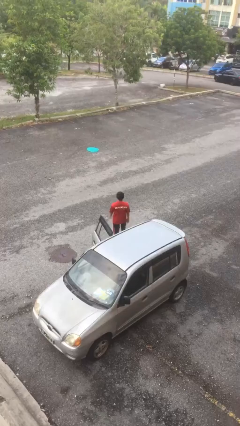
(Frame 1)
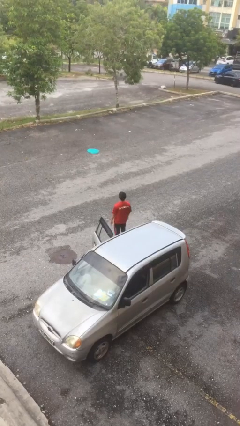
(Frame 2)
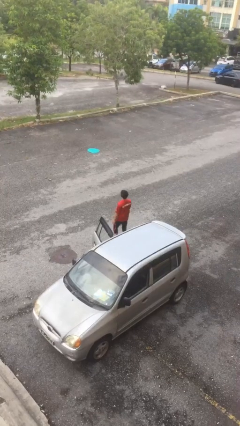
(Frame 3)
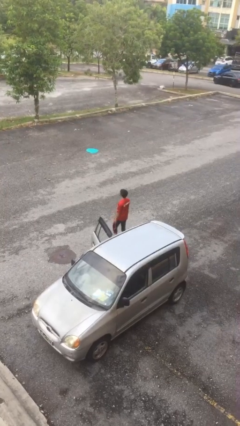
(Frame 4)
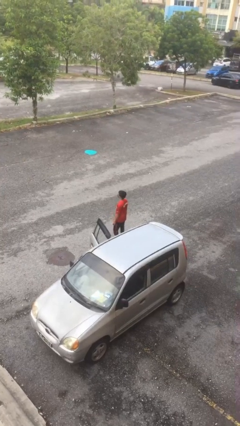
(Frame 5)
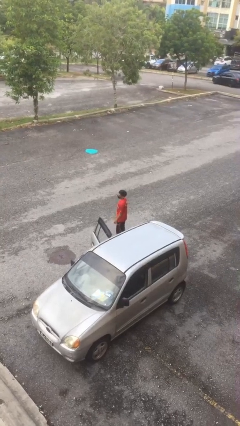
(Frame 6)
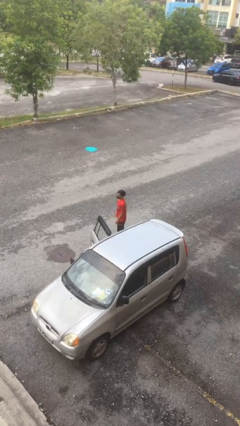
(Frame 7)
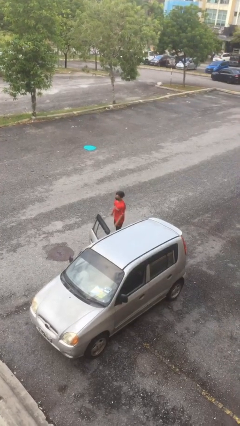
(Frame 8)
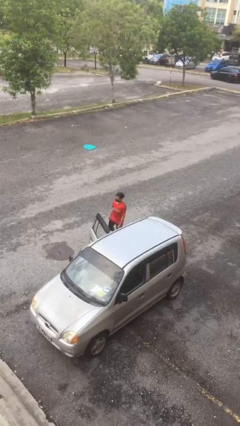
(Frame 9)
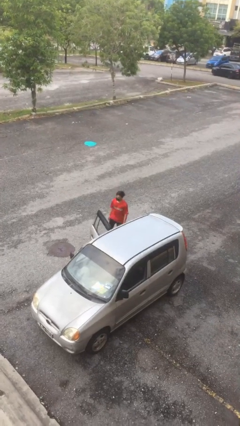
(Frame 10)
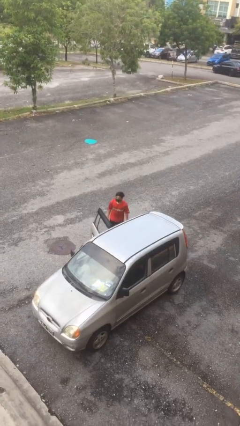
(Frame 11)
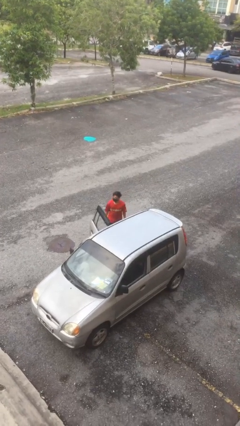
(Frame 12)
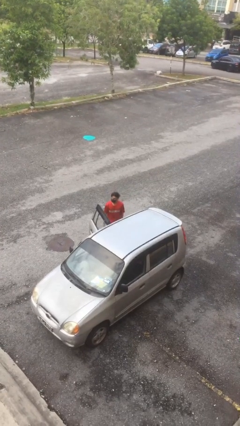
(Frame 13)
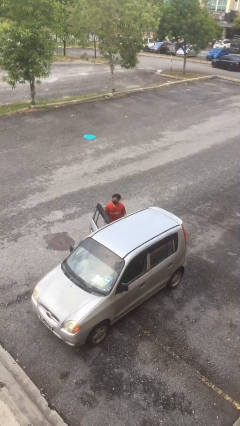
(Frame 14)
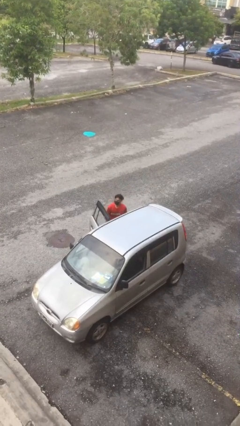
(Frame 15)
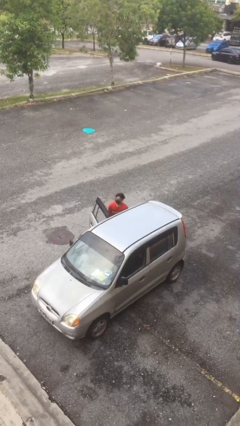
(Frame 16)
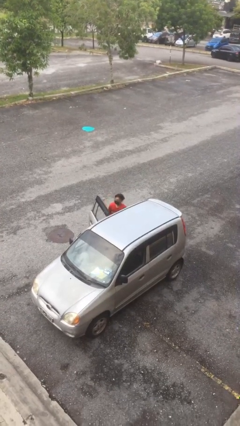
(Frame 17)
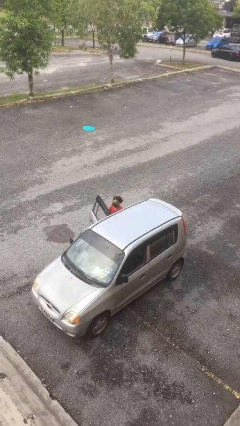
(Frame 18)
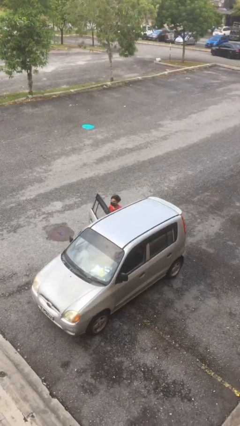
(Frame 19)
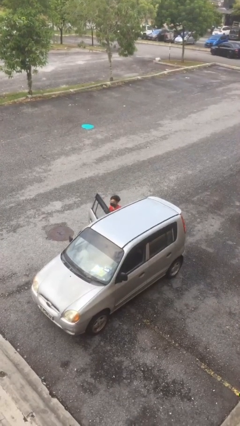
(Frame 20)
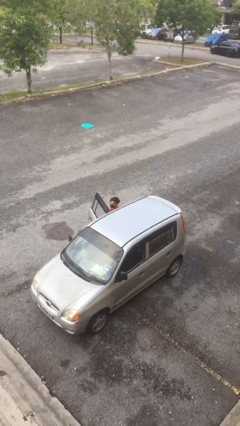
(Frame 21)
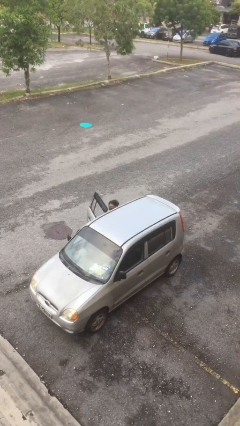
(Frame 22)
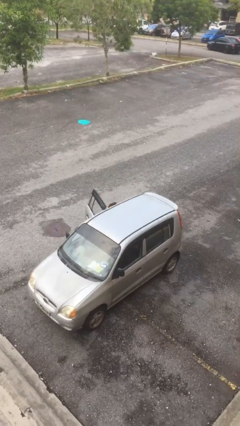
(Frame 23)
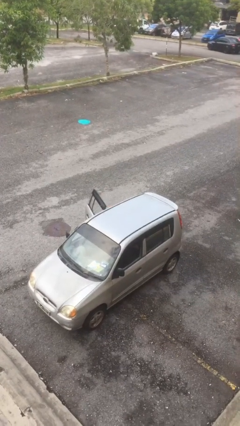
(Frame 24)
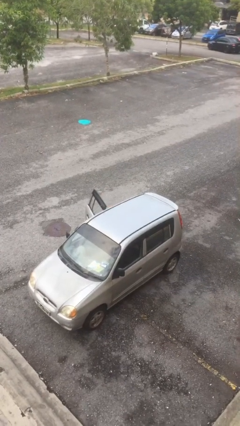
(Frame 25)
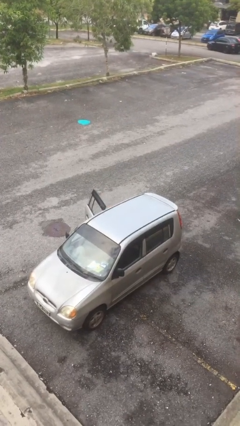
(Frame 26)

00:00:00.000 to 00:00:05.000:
person enters car

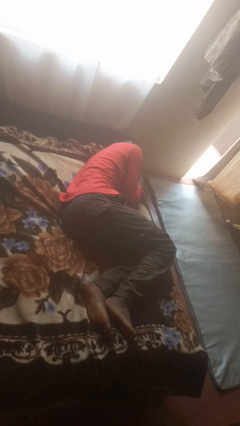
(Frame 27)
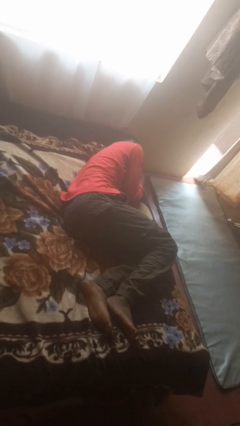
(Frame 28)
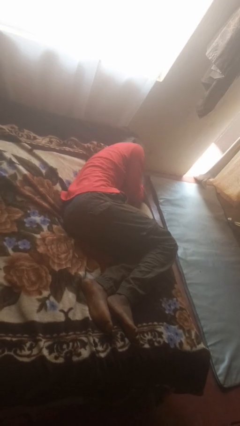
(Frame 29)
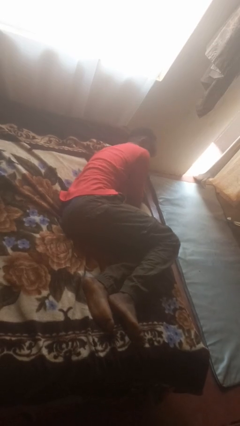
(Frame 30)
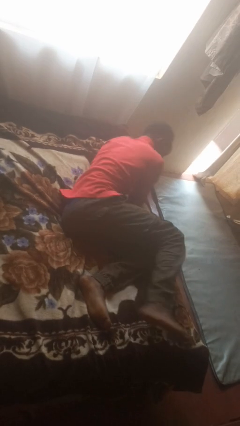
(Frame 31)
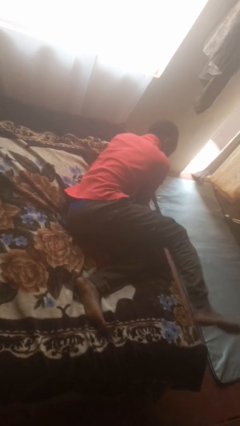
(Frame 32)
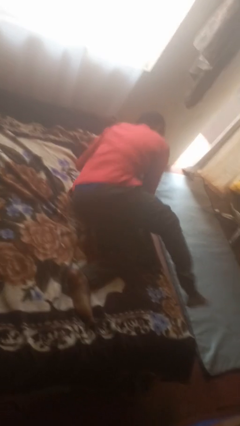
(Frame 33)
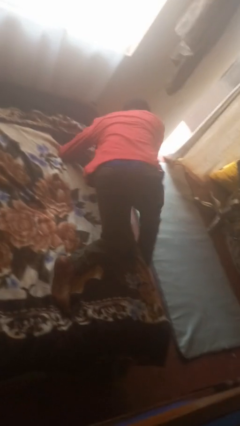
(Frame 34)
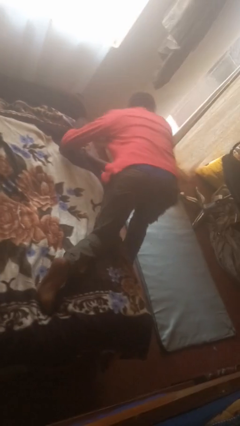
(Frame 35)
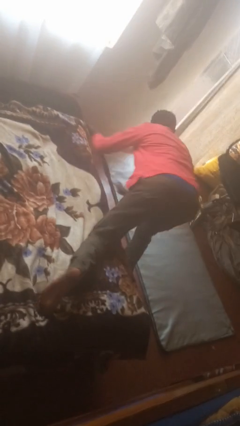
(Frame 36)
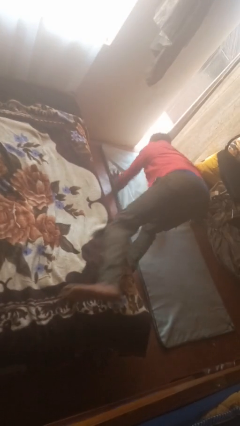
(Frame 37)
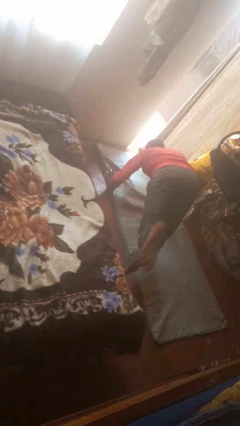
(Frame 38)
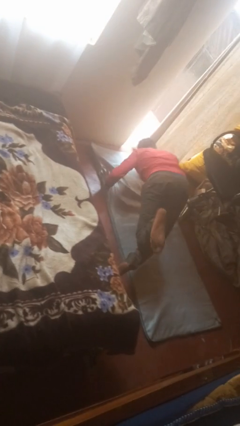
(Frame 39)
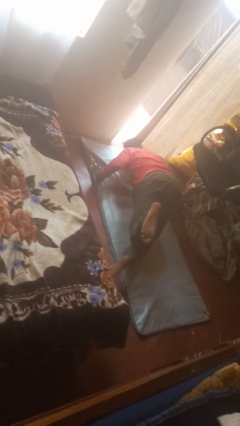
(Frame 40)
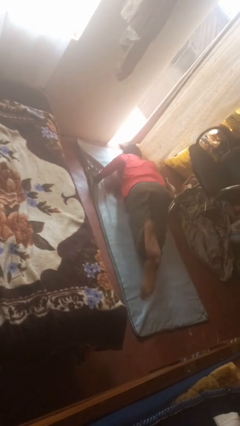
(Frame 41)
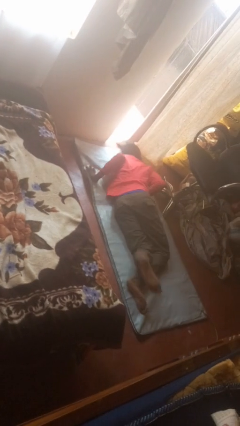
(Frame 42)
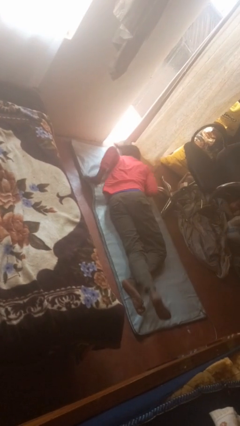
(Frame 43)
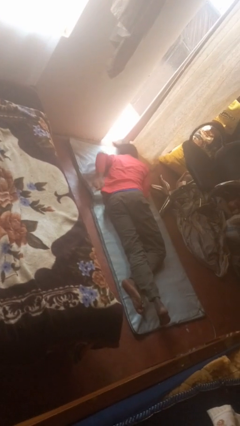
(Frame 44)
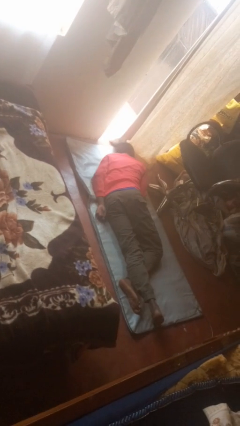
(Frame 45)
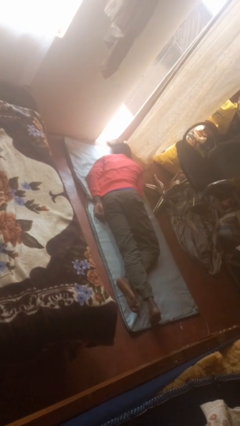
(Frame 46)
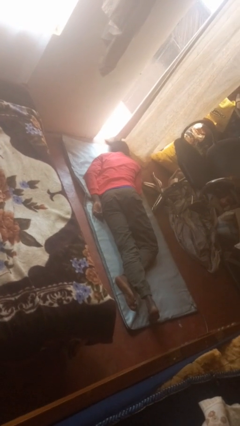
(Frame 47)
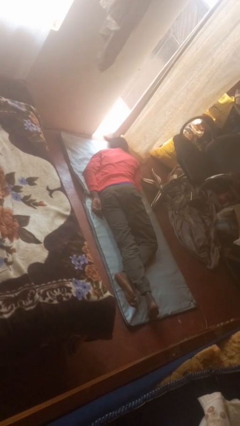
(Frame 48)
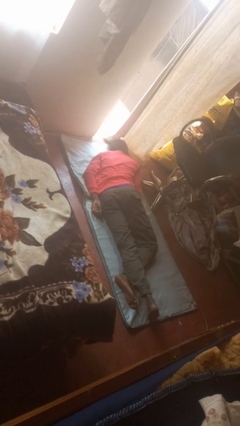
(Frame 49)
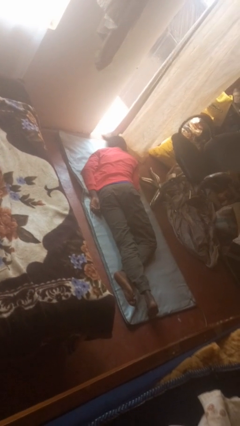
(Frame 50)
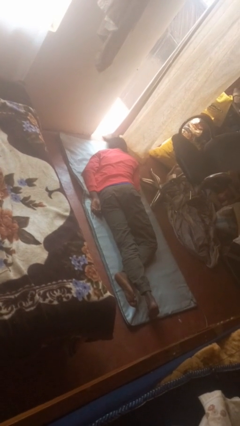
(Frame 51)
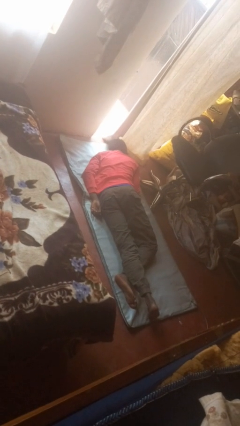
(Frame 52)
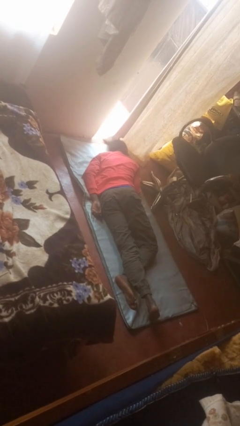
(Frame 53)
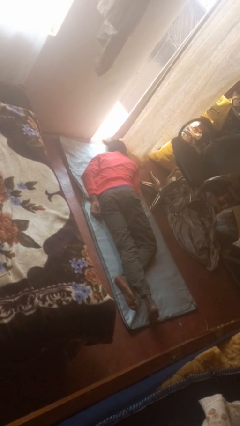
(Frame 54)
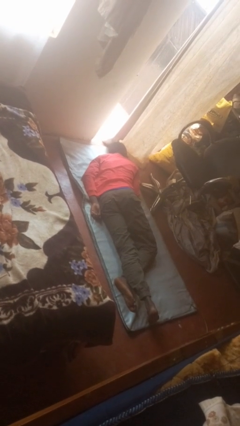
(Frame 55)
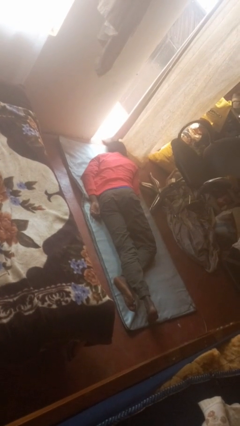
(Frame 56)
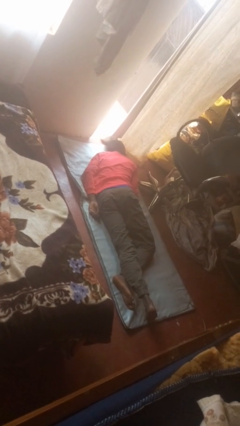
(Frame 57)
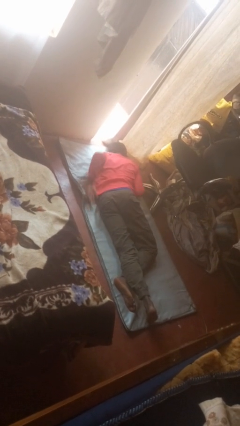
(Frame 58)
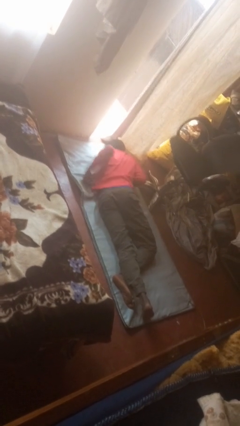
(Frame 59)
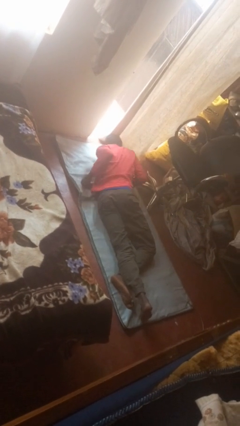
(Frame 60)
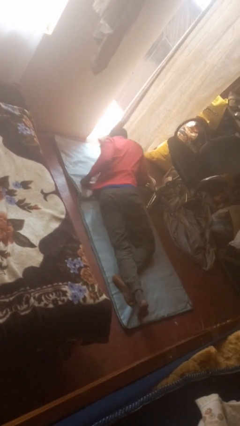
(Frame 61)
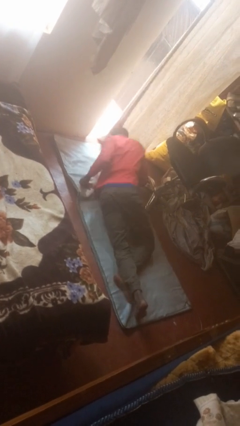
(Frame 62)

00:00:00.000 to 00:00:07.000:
person falls from bed

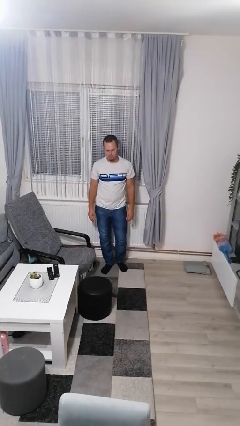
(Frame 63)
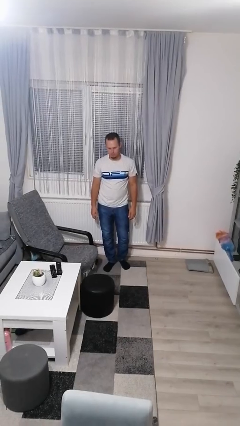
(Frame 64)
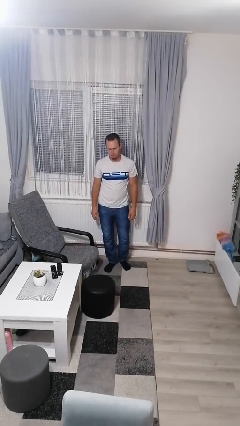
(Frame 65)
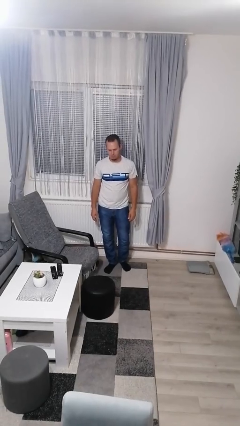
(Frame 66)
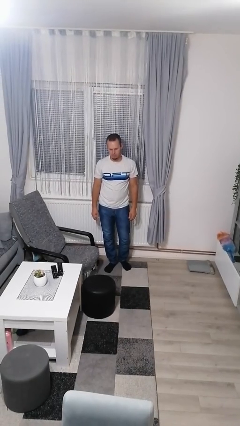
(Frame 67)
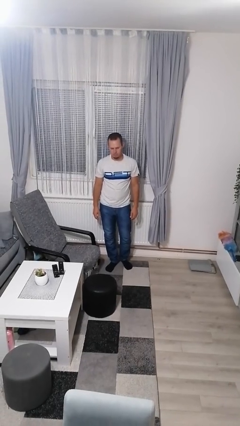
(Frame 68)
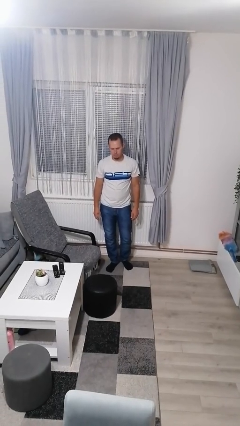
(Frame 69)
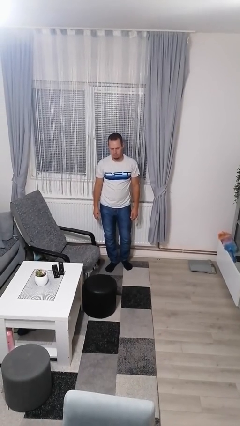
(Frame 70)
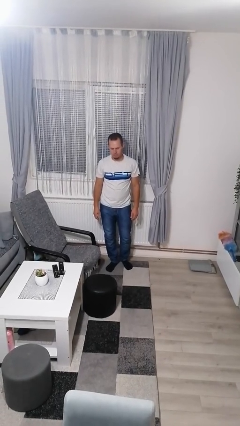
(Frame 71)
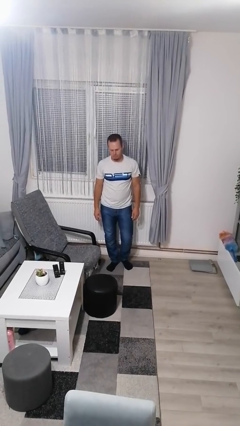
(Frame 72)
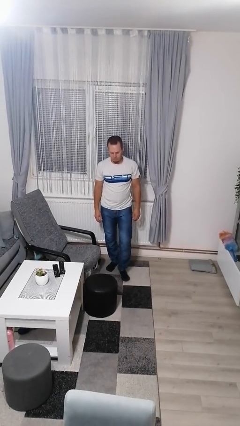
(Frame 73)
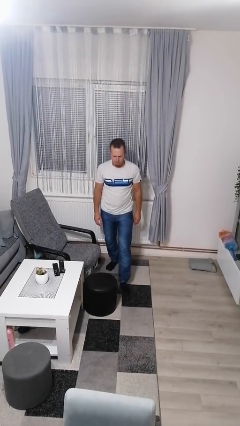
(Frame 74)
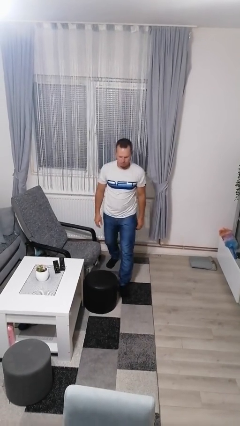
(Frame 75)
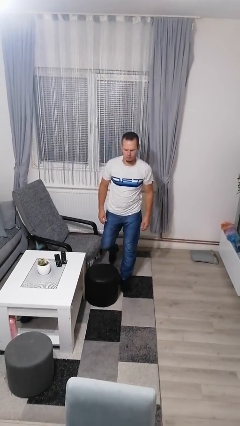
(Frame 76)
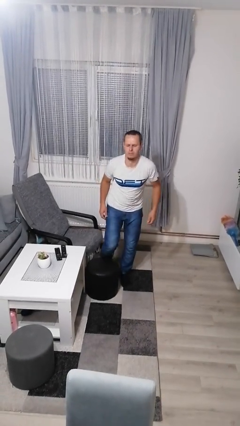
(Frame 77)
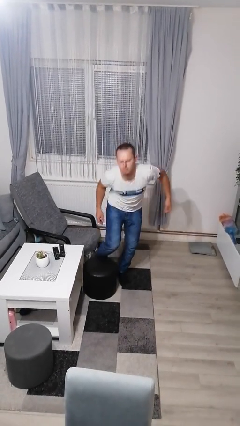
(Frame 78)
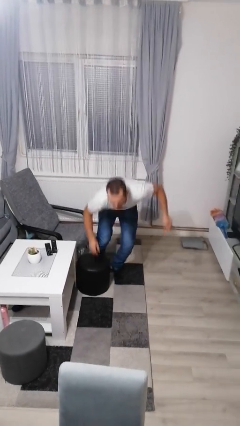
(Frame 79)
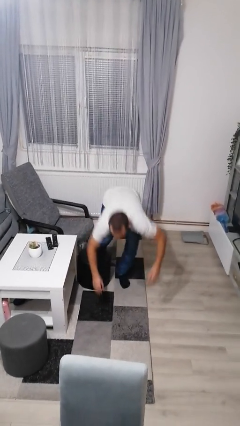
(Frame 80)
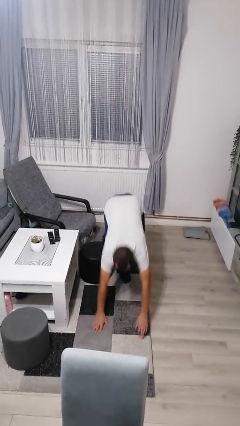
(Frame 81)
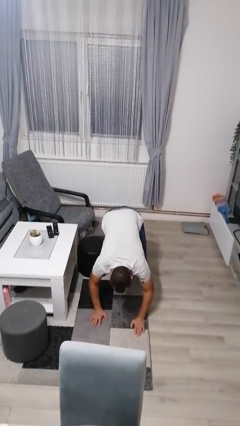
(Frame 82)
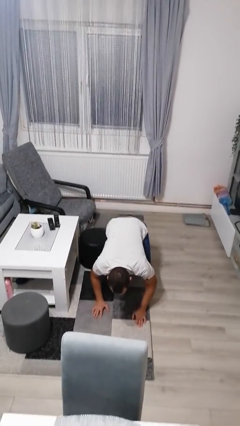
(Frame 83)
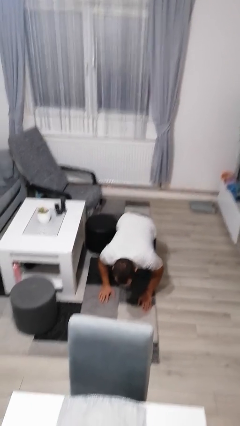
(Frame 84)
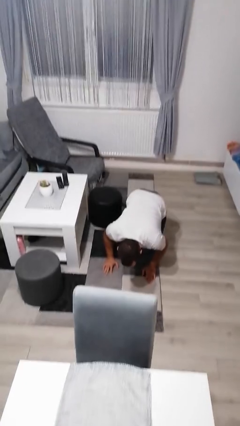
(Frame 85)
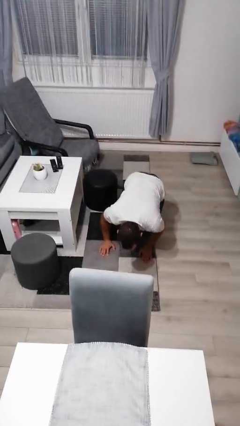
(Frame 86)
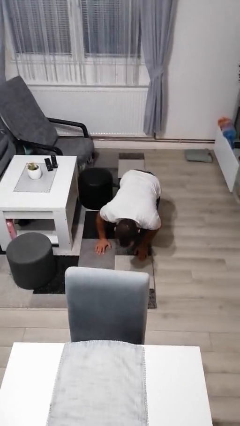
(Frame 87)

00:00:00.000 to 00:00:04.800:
person trips on object on floor

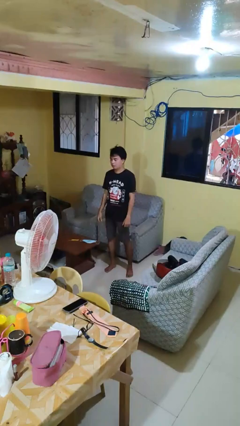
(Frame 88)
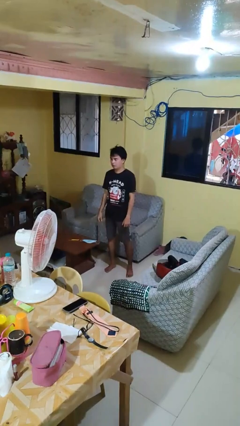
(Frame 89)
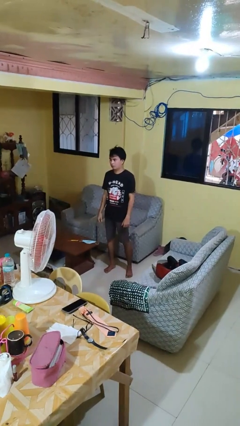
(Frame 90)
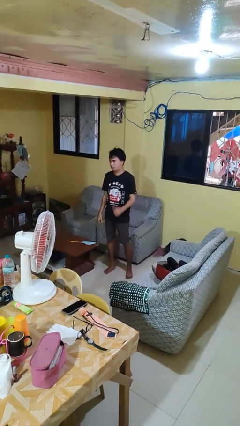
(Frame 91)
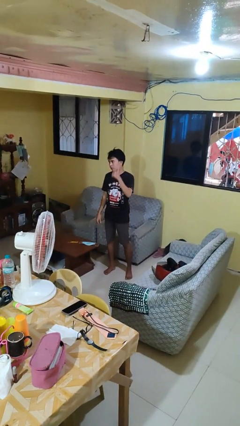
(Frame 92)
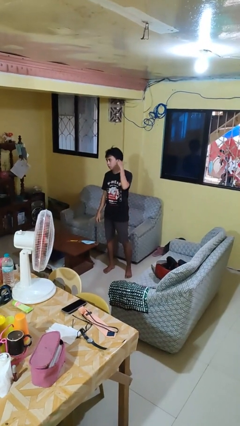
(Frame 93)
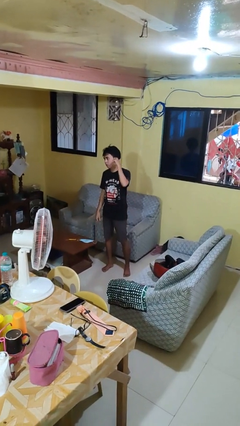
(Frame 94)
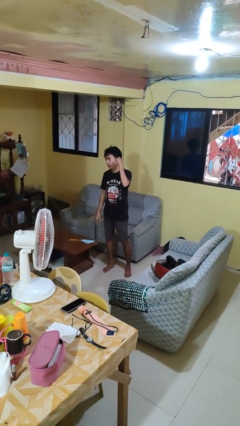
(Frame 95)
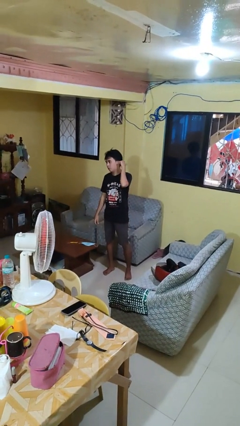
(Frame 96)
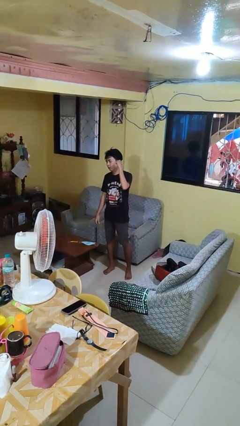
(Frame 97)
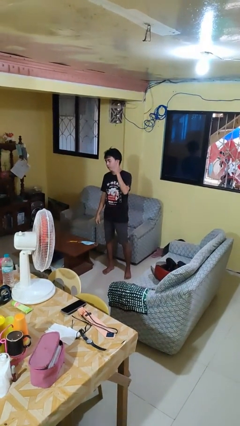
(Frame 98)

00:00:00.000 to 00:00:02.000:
person gestures behind me
